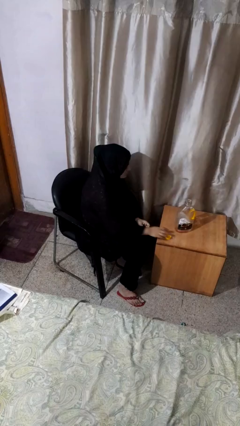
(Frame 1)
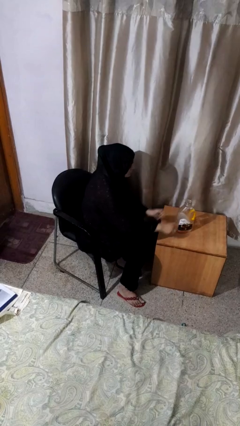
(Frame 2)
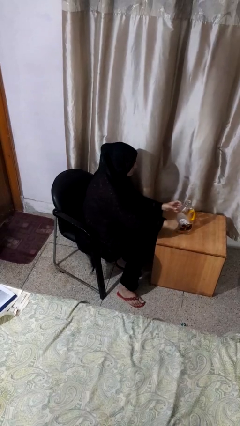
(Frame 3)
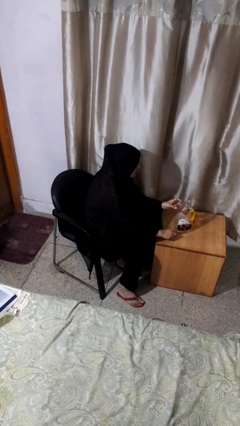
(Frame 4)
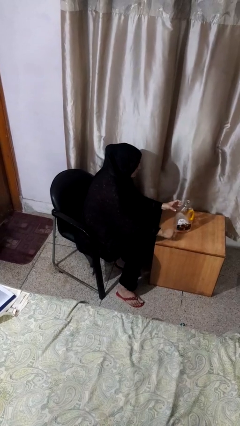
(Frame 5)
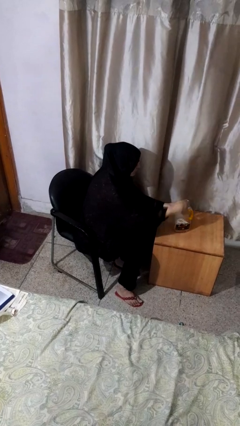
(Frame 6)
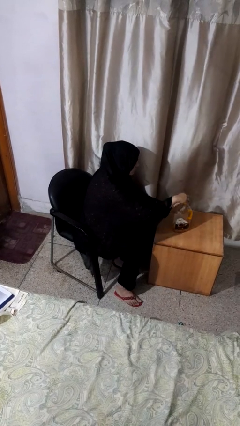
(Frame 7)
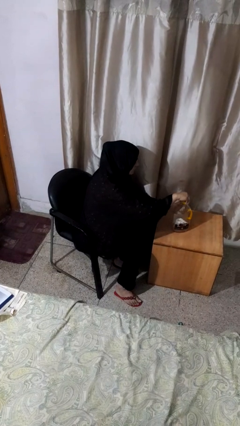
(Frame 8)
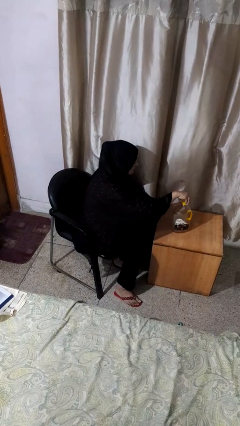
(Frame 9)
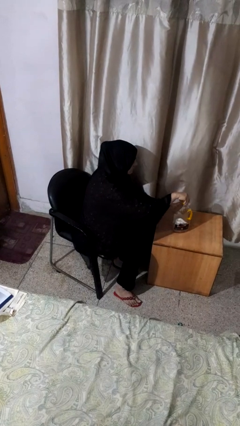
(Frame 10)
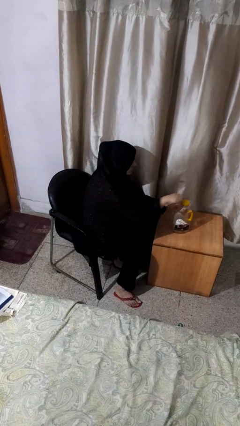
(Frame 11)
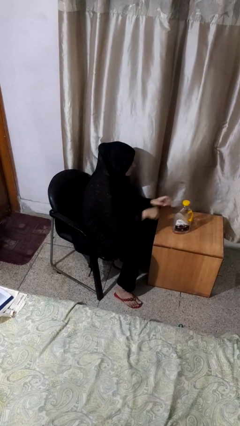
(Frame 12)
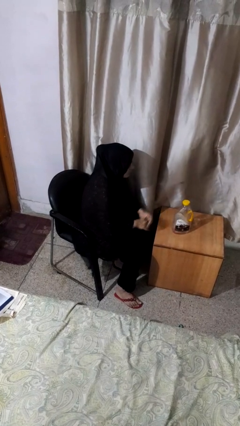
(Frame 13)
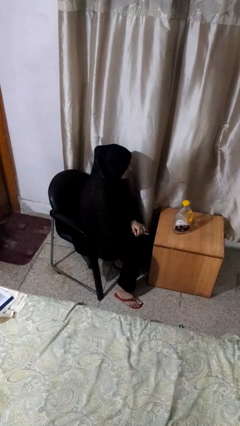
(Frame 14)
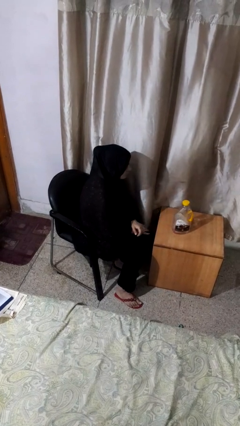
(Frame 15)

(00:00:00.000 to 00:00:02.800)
person screws lid to bottle

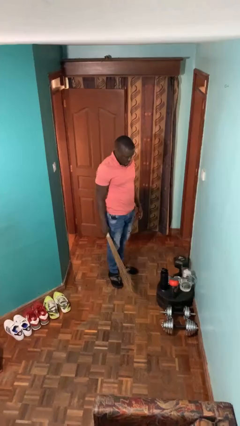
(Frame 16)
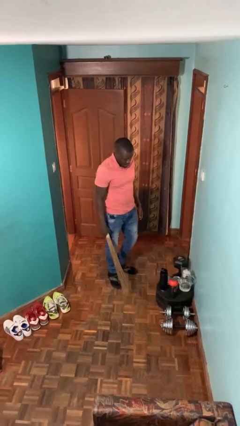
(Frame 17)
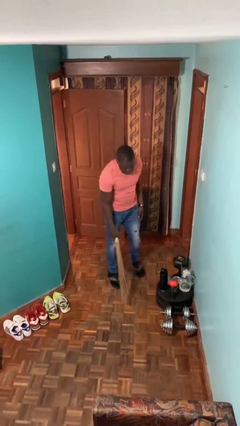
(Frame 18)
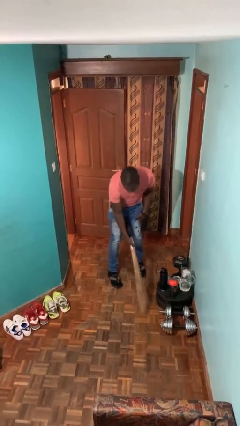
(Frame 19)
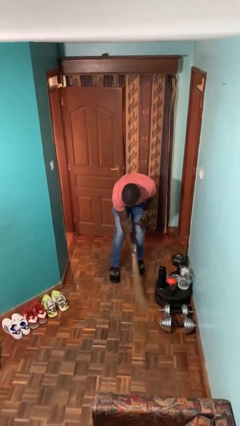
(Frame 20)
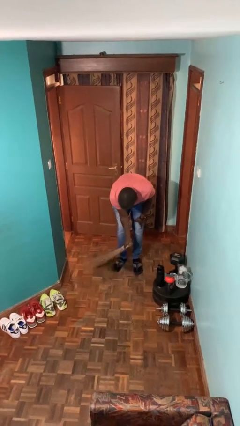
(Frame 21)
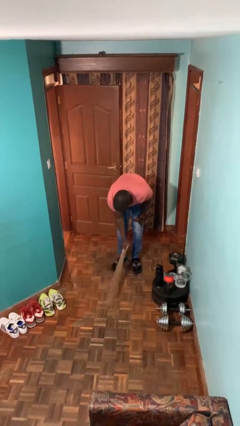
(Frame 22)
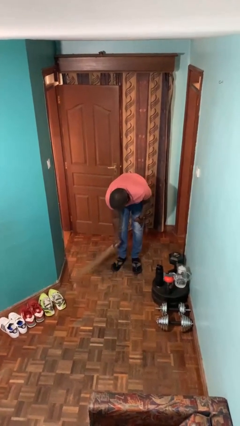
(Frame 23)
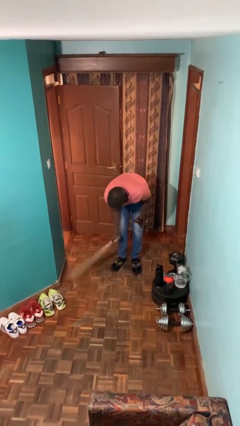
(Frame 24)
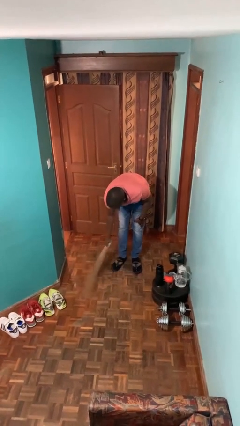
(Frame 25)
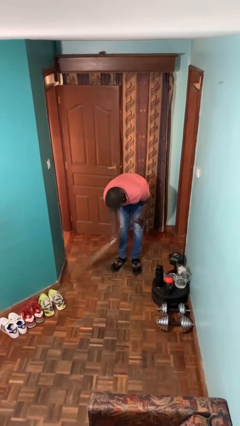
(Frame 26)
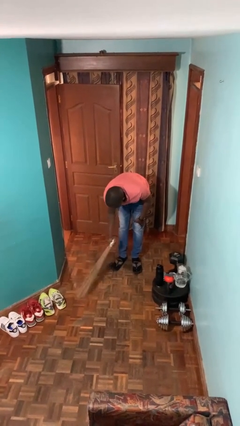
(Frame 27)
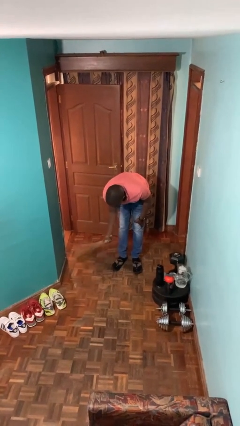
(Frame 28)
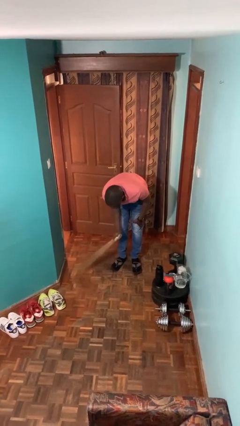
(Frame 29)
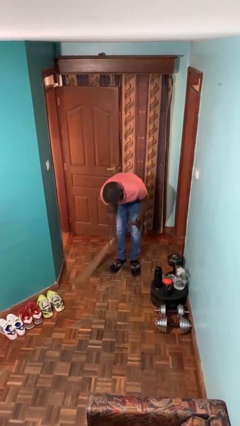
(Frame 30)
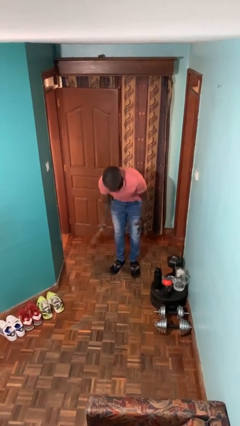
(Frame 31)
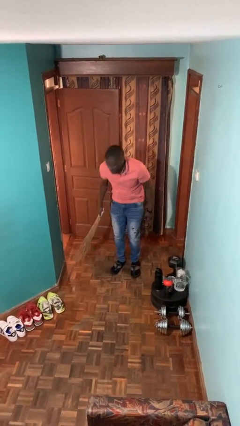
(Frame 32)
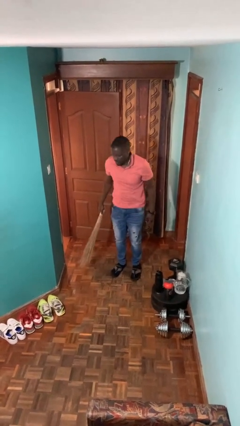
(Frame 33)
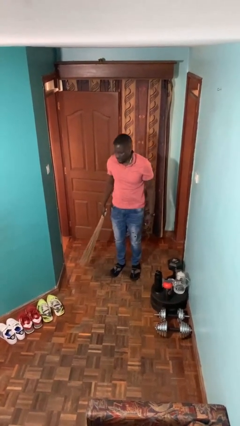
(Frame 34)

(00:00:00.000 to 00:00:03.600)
person sweeps floor

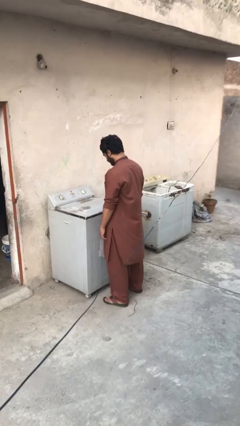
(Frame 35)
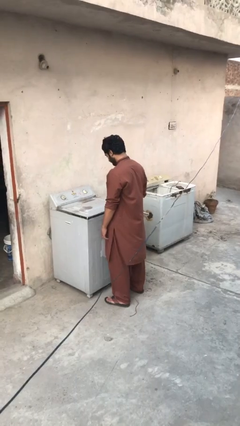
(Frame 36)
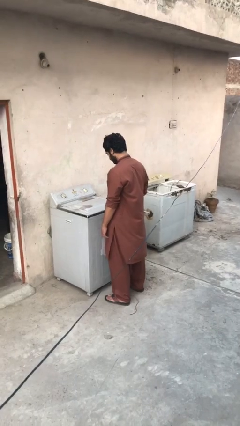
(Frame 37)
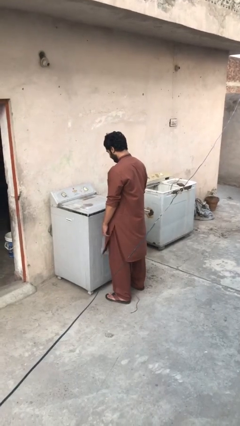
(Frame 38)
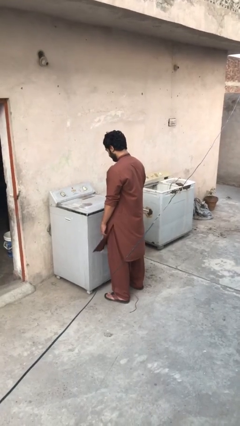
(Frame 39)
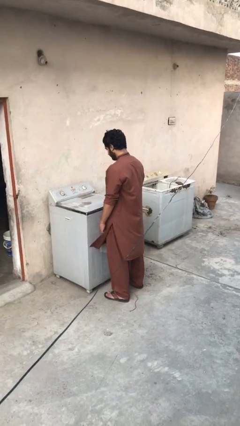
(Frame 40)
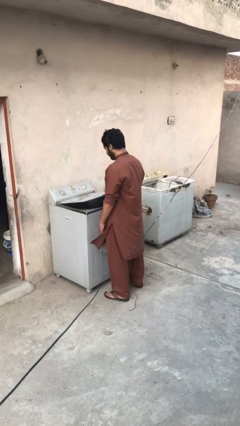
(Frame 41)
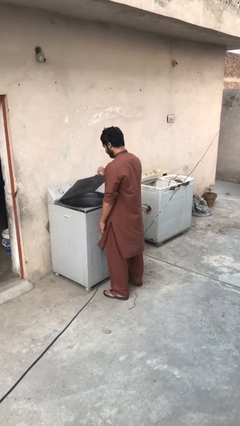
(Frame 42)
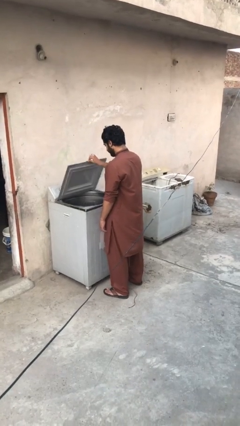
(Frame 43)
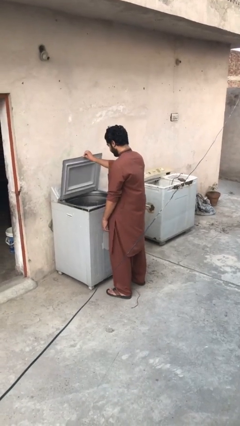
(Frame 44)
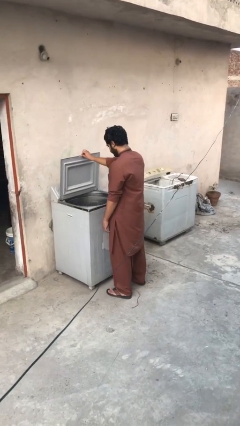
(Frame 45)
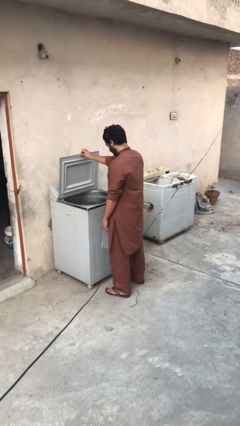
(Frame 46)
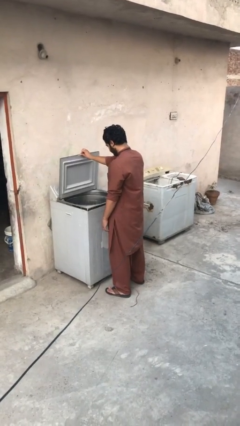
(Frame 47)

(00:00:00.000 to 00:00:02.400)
person opens clothes washer

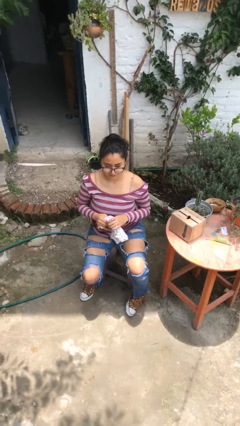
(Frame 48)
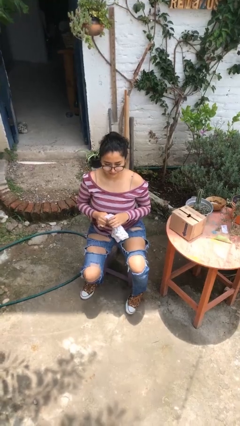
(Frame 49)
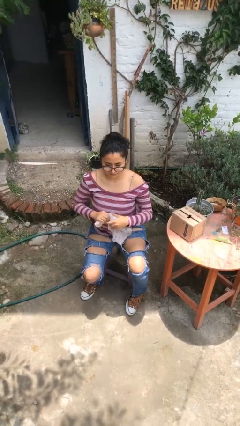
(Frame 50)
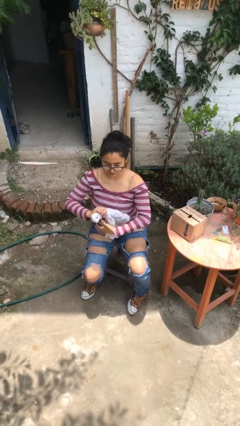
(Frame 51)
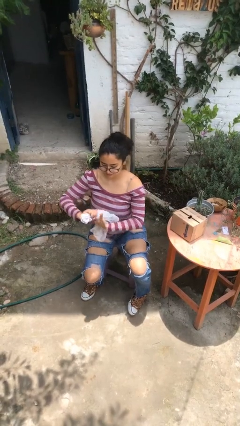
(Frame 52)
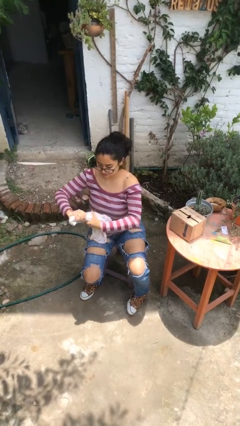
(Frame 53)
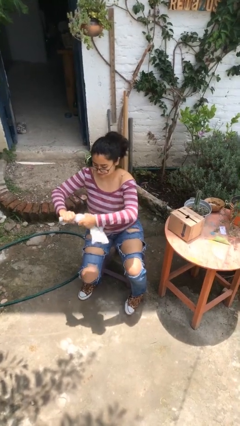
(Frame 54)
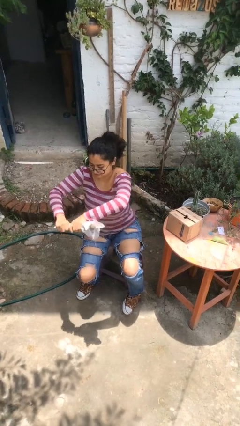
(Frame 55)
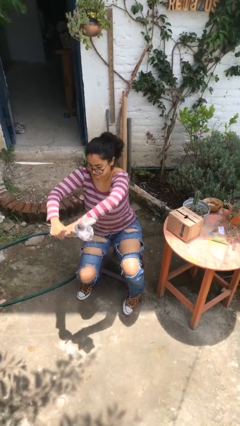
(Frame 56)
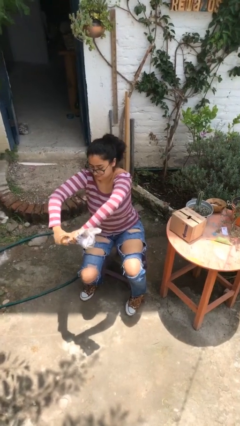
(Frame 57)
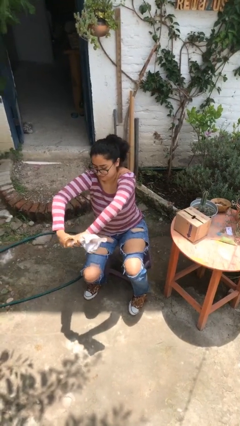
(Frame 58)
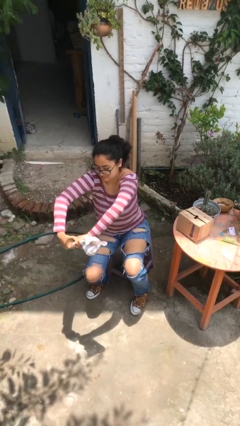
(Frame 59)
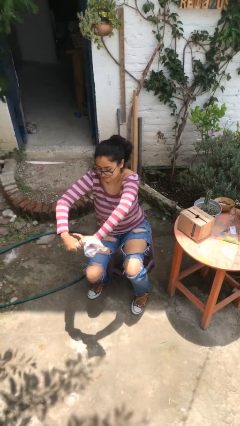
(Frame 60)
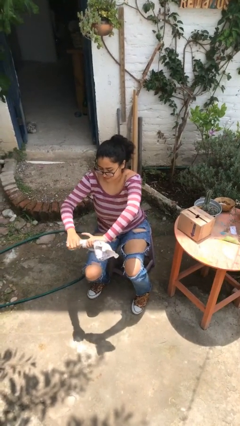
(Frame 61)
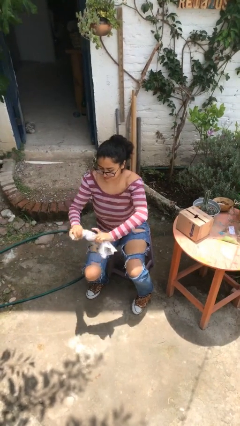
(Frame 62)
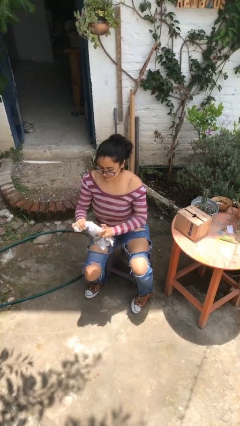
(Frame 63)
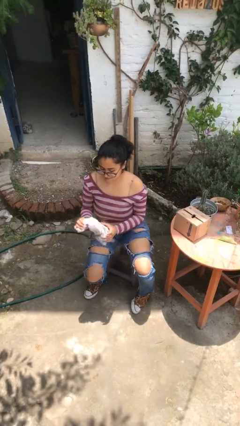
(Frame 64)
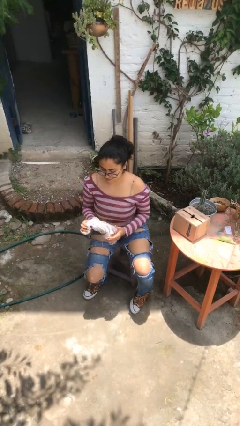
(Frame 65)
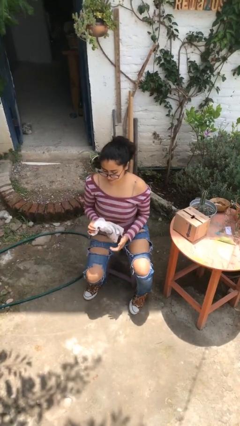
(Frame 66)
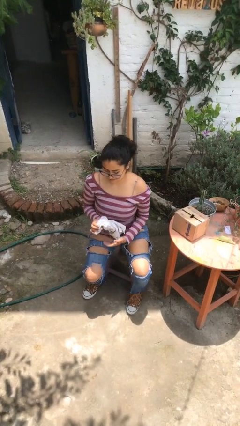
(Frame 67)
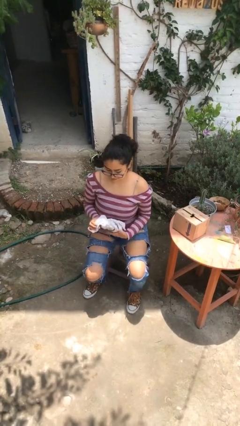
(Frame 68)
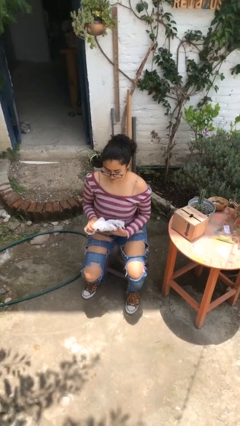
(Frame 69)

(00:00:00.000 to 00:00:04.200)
person squeezes object

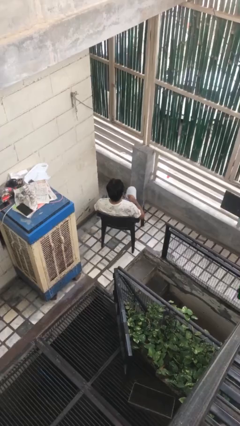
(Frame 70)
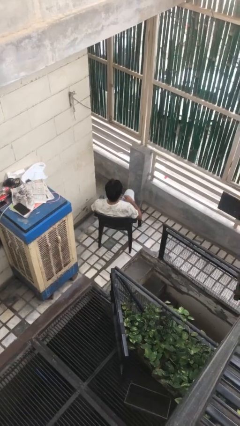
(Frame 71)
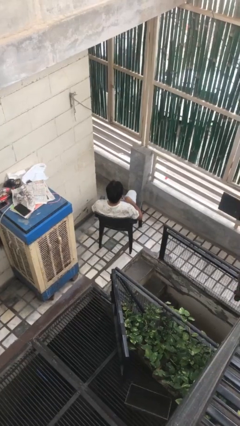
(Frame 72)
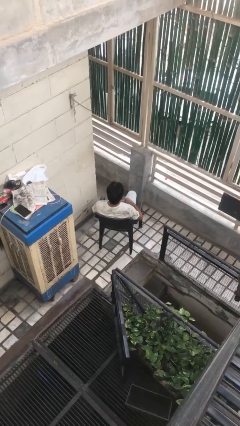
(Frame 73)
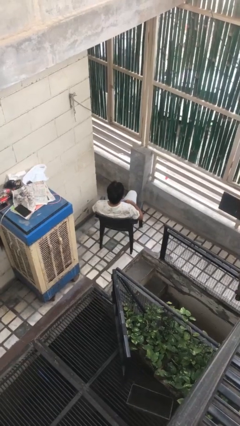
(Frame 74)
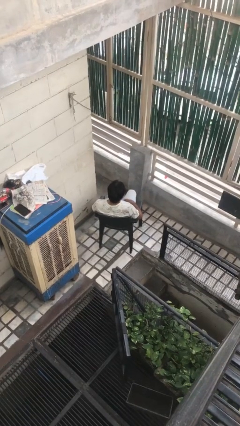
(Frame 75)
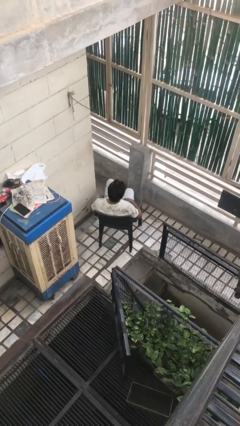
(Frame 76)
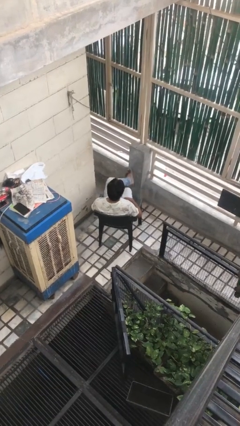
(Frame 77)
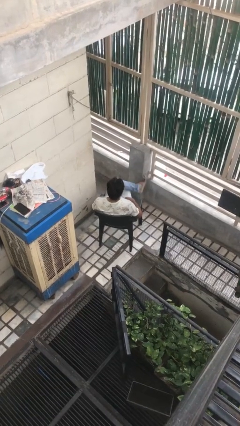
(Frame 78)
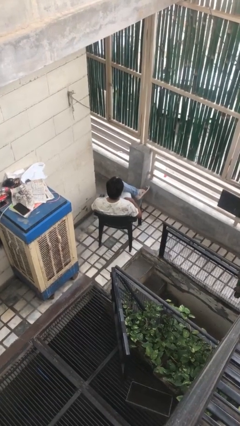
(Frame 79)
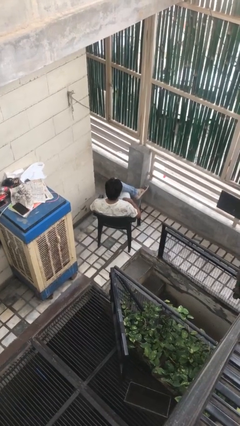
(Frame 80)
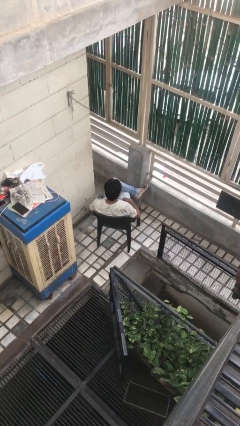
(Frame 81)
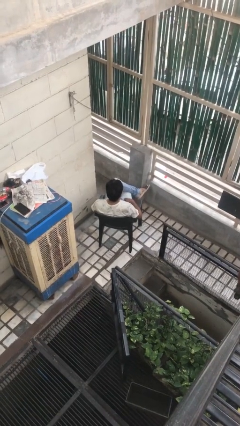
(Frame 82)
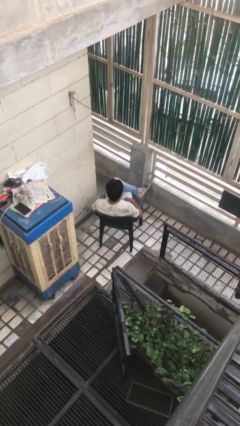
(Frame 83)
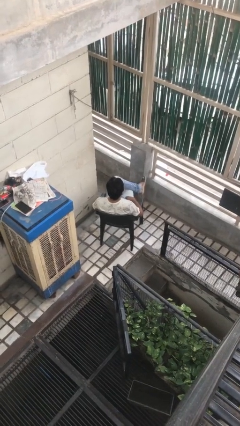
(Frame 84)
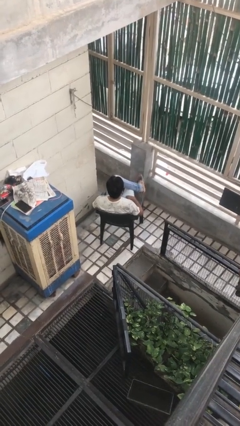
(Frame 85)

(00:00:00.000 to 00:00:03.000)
person crosses legs

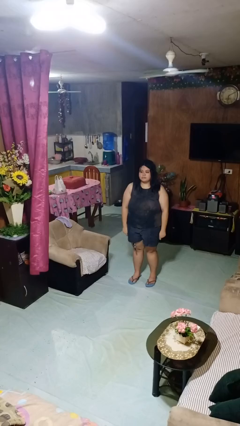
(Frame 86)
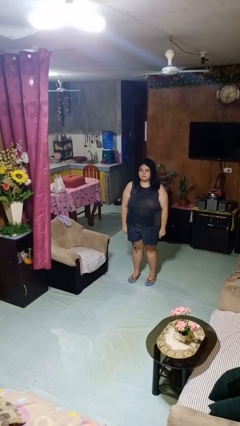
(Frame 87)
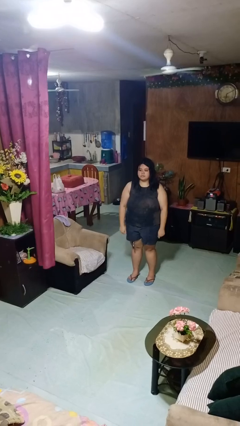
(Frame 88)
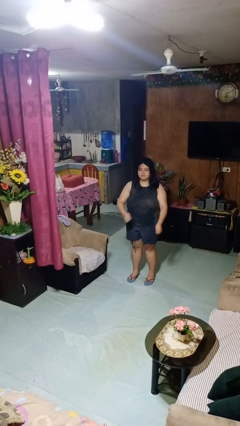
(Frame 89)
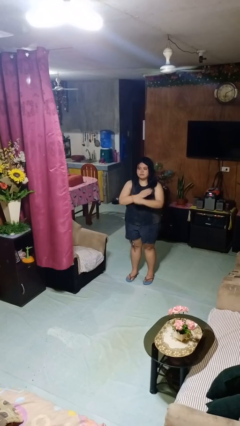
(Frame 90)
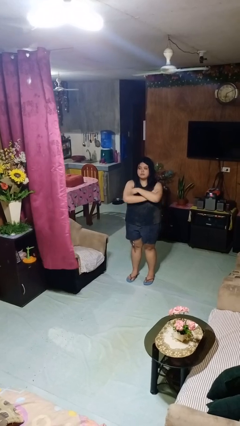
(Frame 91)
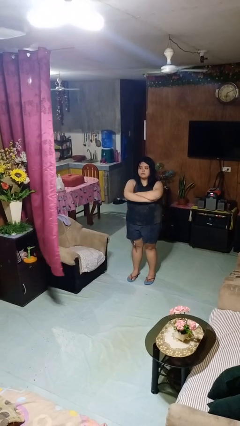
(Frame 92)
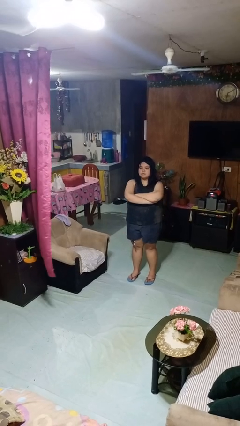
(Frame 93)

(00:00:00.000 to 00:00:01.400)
person crosses arms
